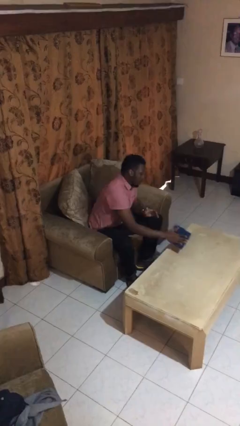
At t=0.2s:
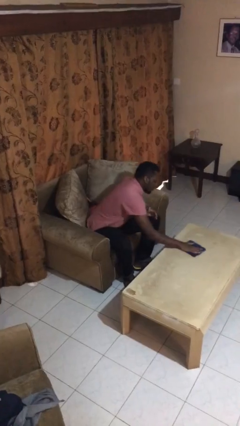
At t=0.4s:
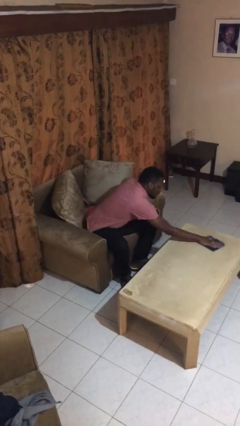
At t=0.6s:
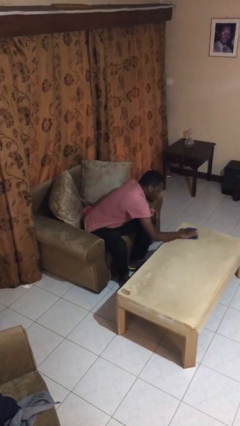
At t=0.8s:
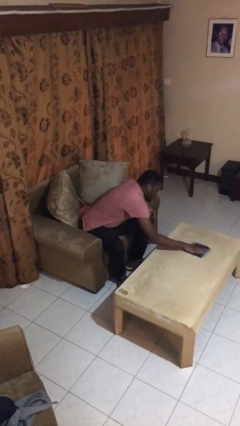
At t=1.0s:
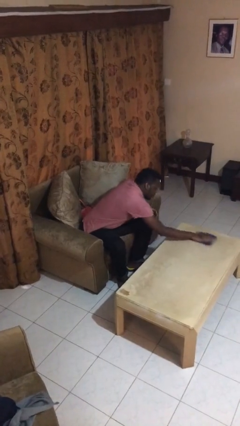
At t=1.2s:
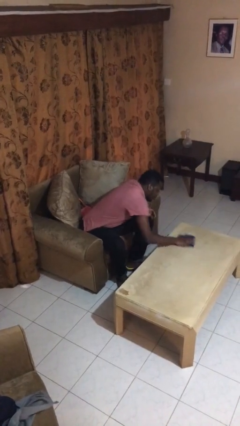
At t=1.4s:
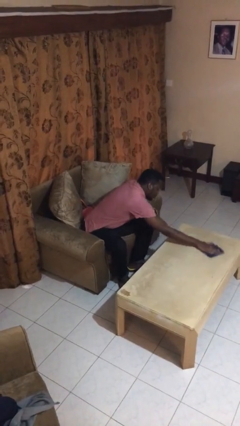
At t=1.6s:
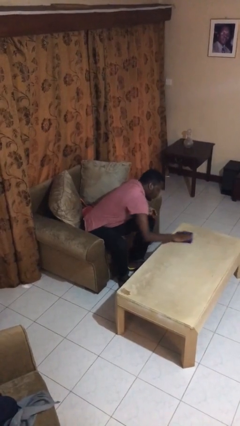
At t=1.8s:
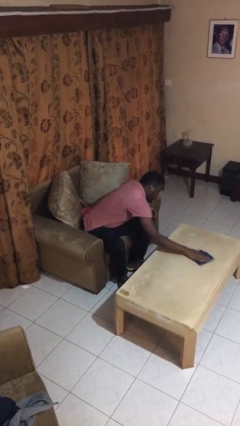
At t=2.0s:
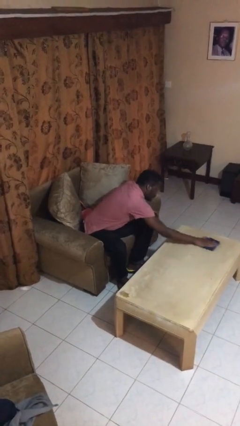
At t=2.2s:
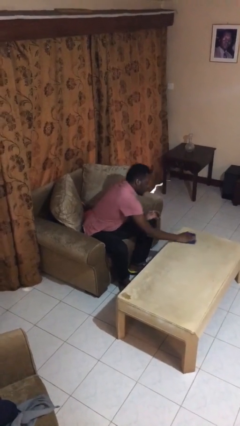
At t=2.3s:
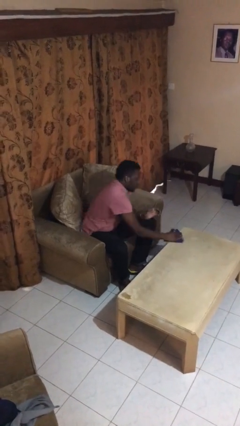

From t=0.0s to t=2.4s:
person cleans table with rag

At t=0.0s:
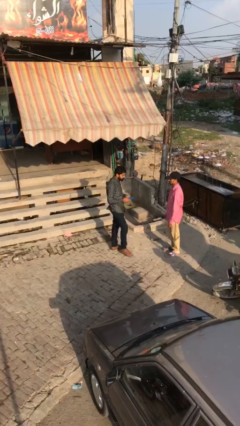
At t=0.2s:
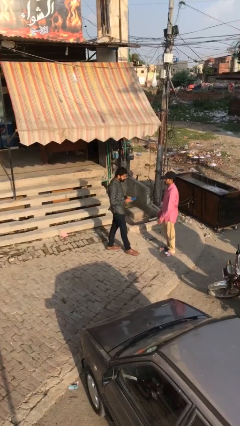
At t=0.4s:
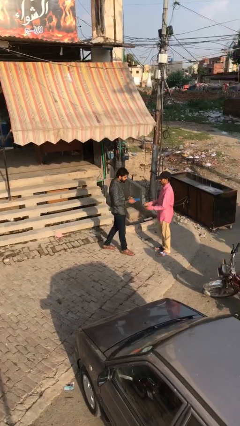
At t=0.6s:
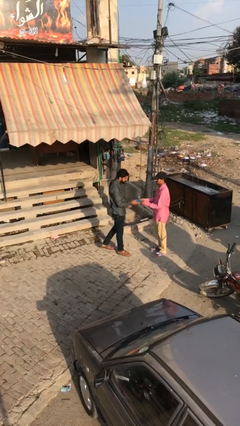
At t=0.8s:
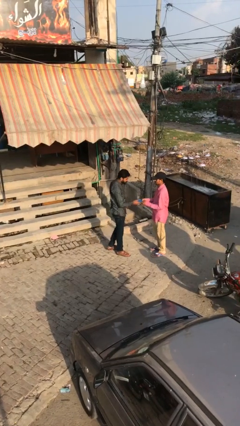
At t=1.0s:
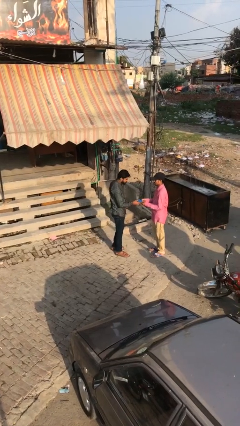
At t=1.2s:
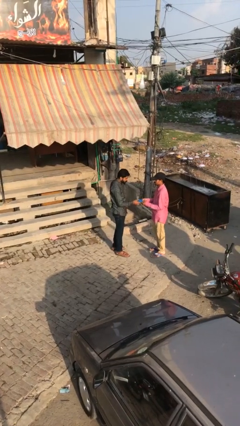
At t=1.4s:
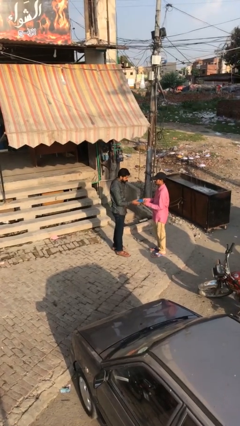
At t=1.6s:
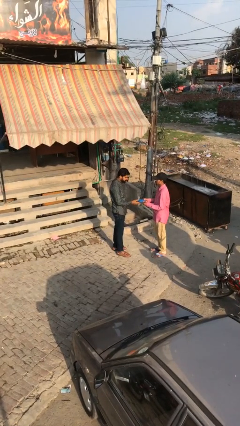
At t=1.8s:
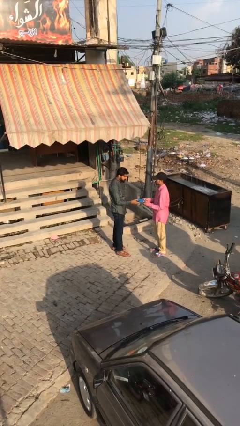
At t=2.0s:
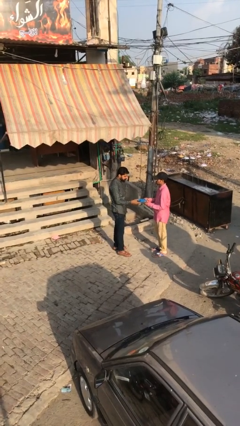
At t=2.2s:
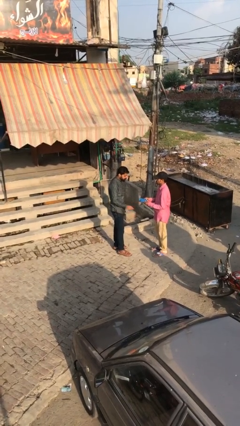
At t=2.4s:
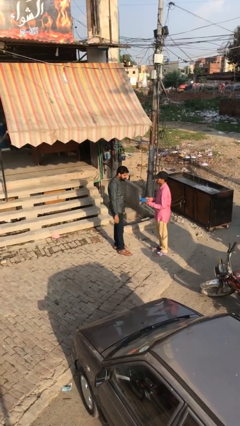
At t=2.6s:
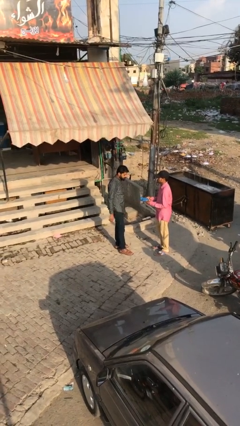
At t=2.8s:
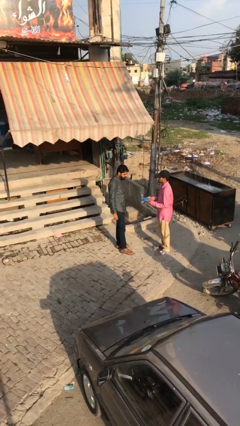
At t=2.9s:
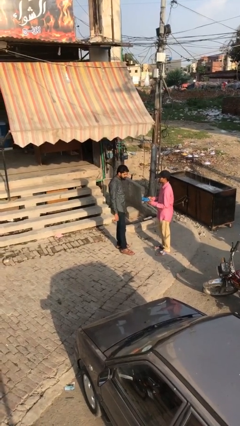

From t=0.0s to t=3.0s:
person transfers object to person

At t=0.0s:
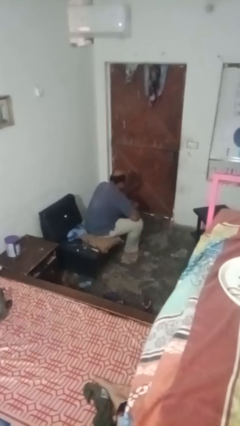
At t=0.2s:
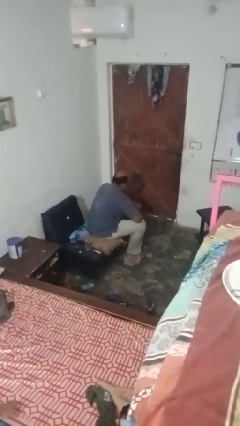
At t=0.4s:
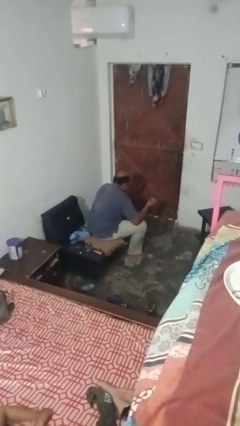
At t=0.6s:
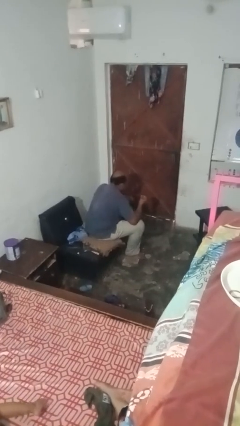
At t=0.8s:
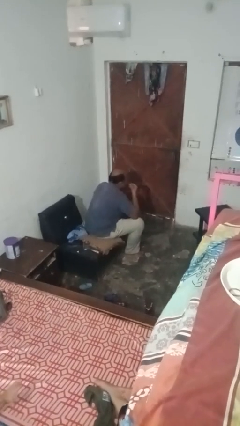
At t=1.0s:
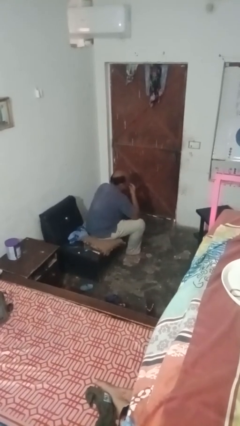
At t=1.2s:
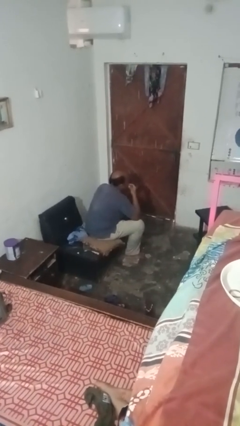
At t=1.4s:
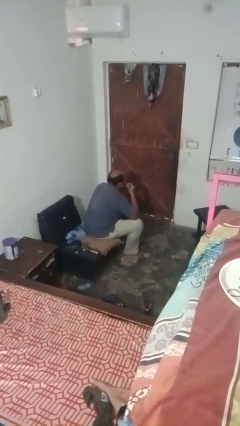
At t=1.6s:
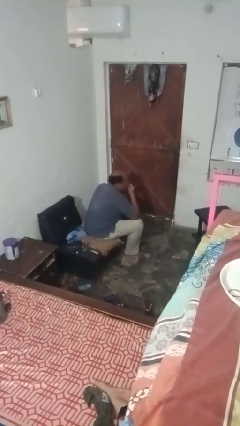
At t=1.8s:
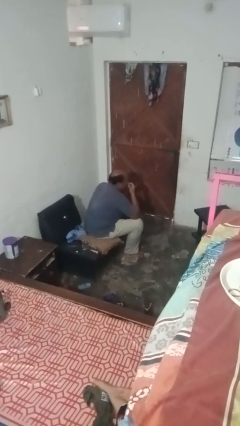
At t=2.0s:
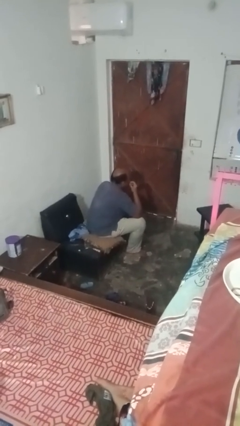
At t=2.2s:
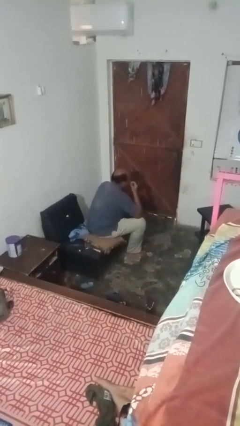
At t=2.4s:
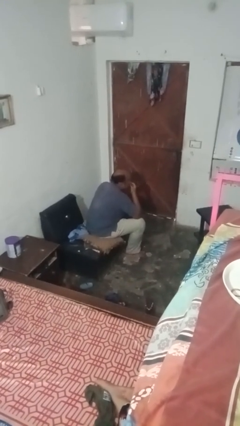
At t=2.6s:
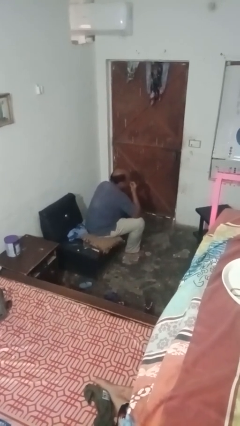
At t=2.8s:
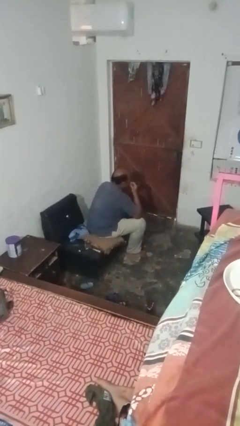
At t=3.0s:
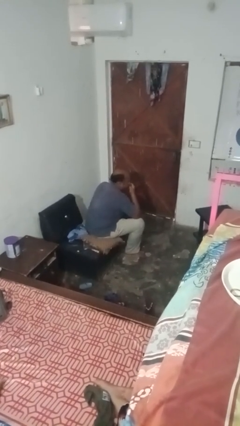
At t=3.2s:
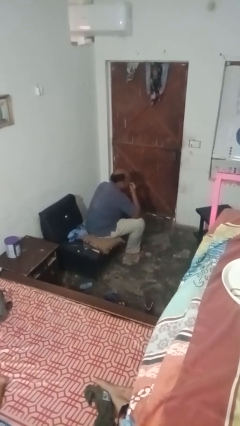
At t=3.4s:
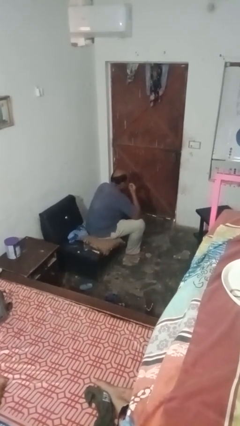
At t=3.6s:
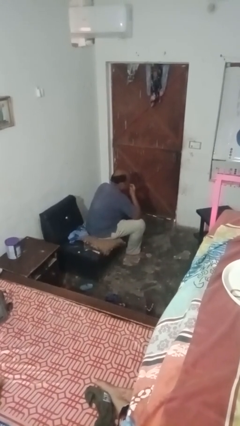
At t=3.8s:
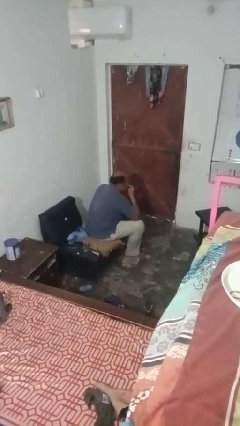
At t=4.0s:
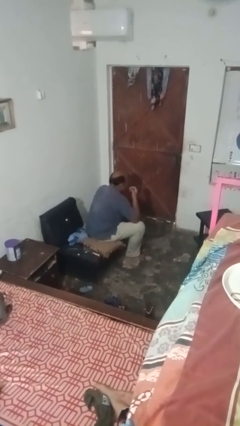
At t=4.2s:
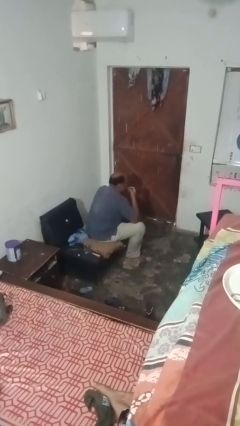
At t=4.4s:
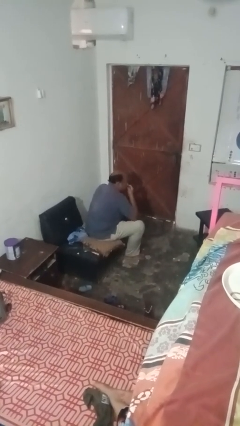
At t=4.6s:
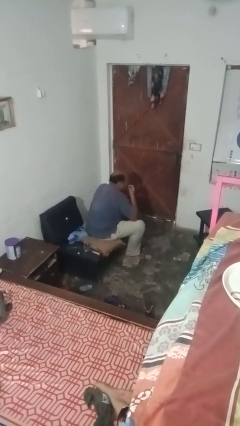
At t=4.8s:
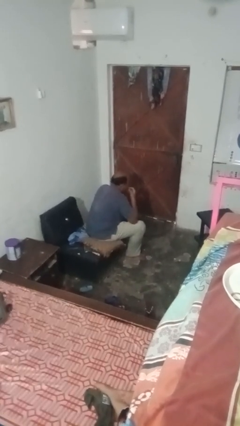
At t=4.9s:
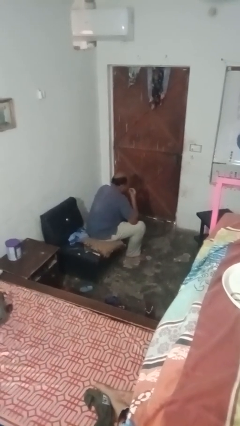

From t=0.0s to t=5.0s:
person applies lip makeup

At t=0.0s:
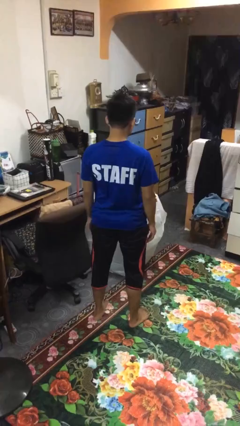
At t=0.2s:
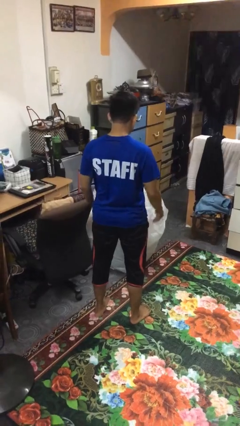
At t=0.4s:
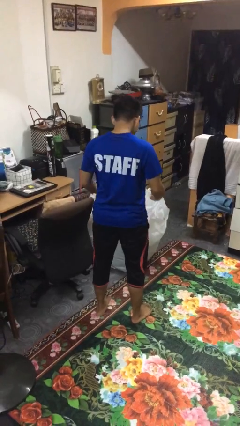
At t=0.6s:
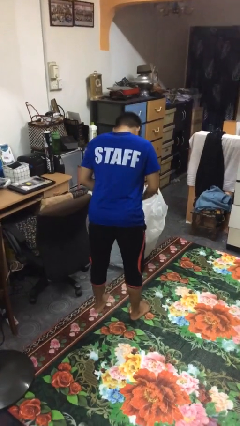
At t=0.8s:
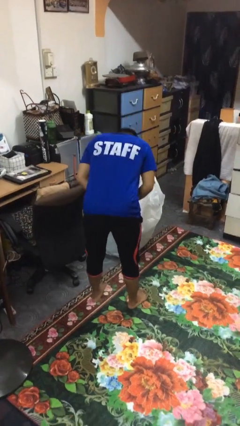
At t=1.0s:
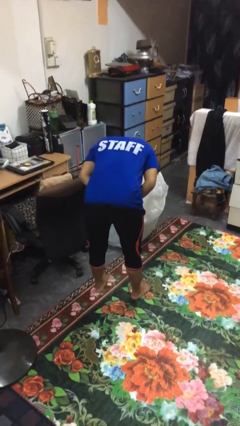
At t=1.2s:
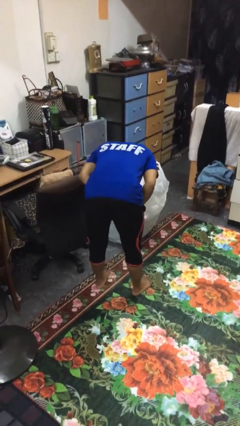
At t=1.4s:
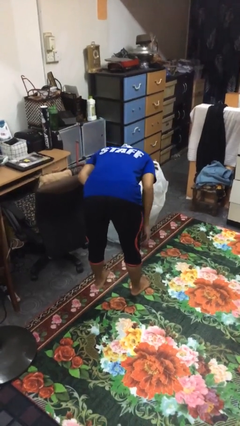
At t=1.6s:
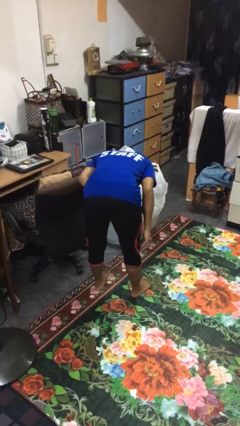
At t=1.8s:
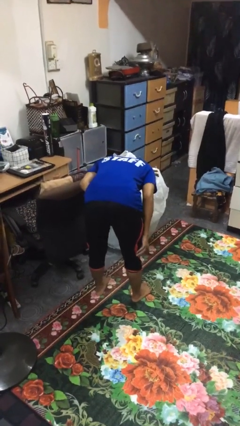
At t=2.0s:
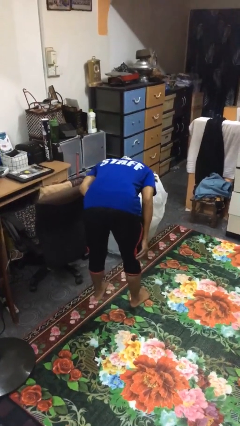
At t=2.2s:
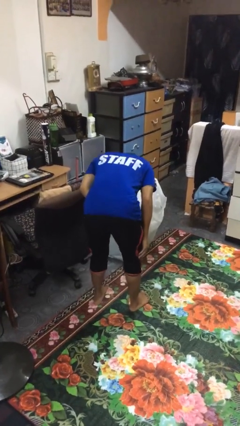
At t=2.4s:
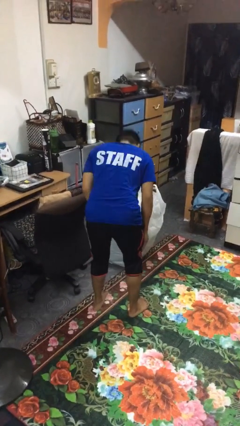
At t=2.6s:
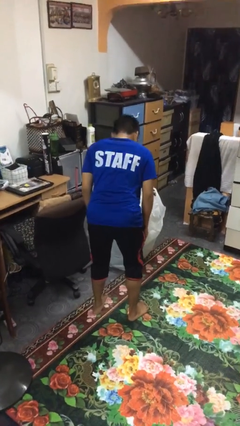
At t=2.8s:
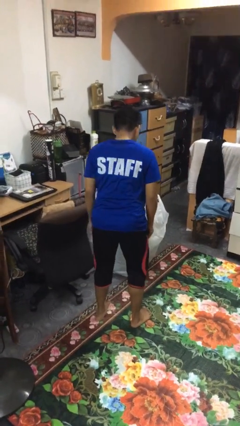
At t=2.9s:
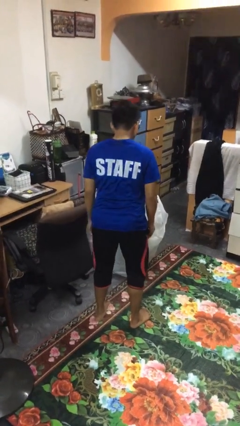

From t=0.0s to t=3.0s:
person bows

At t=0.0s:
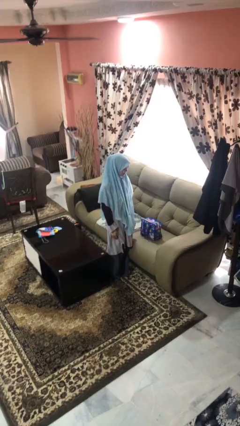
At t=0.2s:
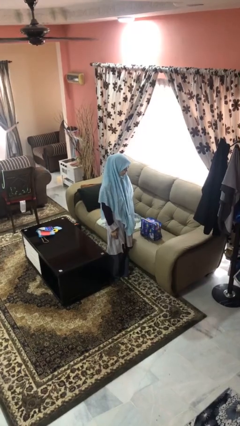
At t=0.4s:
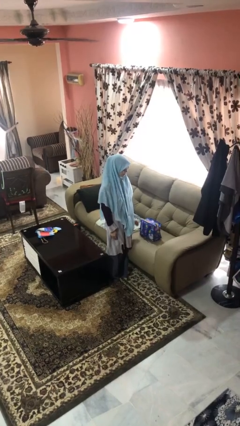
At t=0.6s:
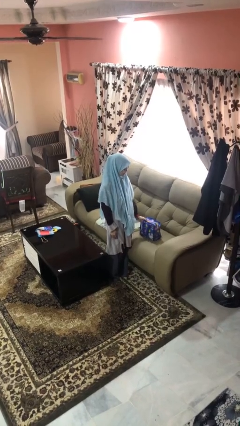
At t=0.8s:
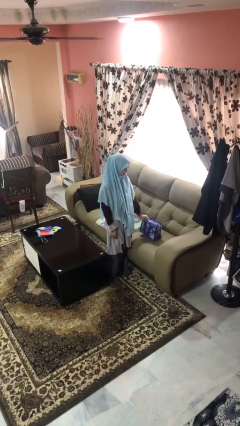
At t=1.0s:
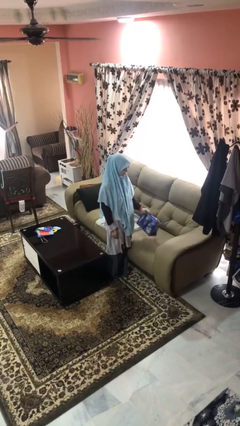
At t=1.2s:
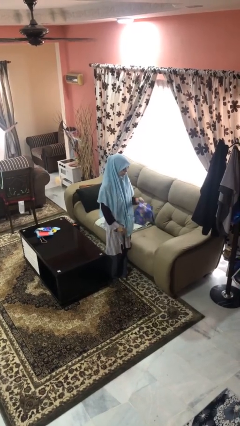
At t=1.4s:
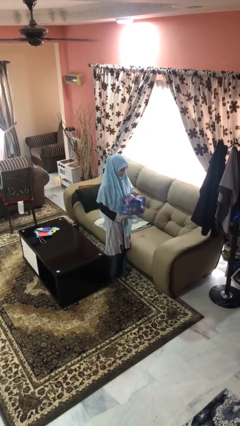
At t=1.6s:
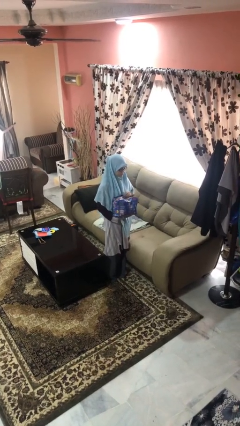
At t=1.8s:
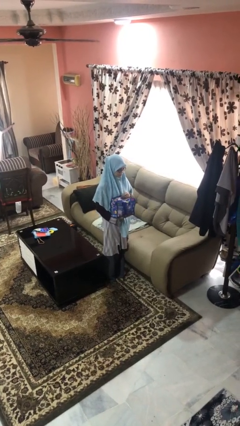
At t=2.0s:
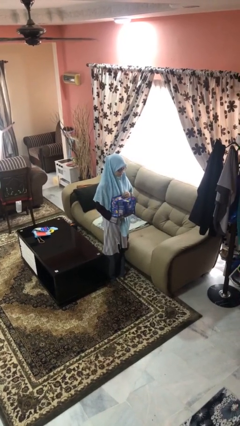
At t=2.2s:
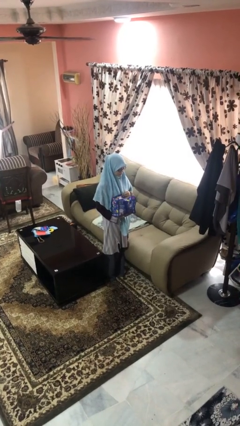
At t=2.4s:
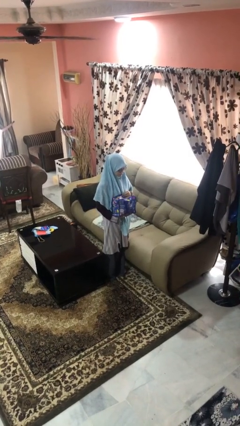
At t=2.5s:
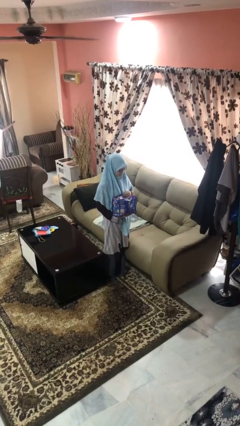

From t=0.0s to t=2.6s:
person picks up object from couch

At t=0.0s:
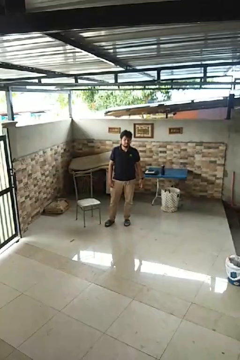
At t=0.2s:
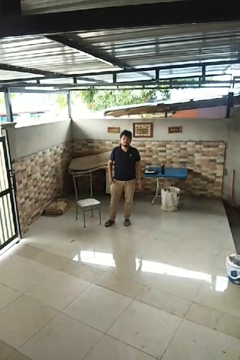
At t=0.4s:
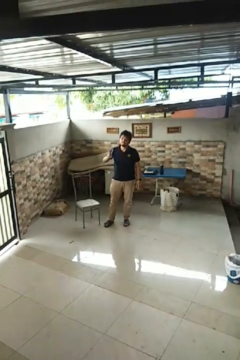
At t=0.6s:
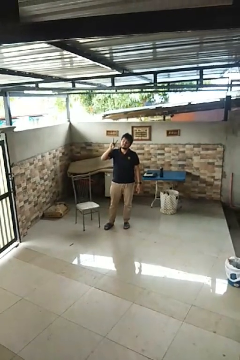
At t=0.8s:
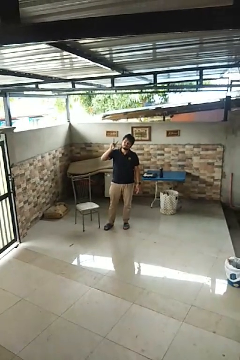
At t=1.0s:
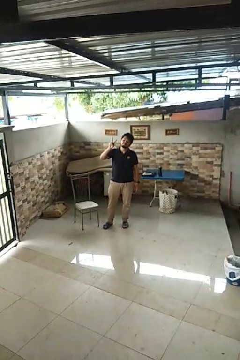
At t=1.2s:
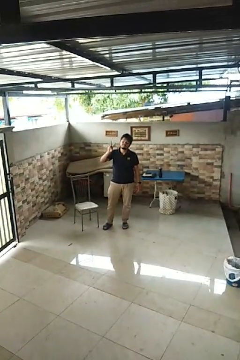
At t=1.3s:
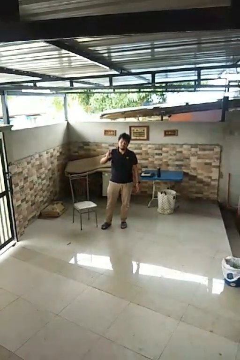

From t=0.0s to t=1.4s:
person gestures peace

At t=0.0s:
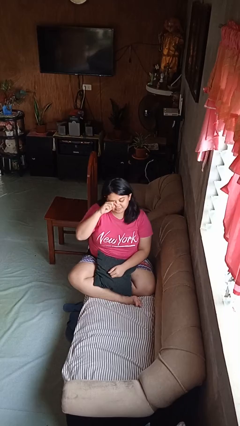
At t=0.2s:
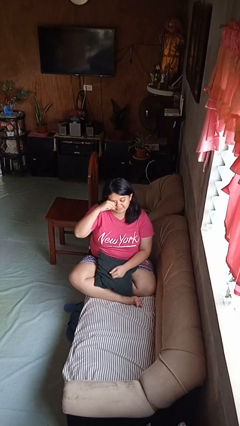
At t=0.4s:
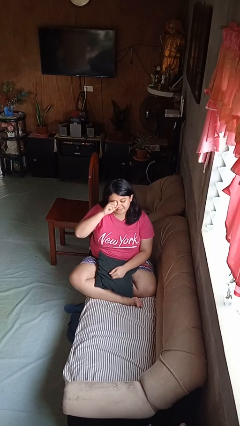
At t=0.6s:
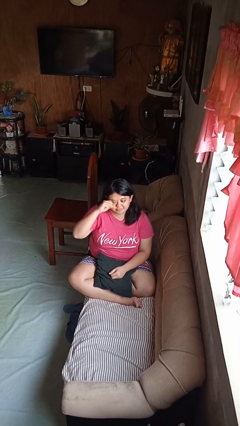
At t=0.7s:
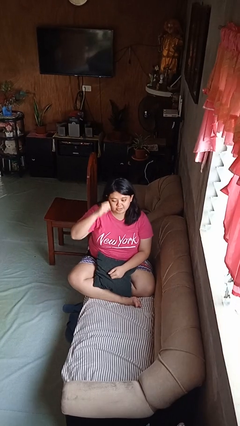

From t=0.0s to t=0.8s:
person rubs eyes
